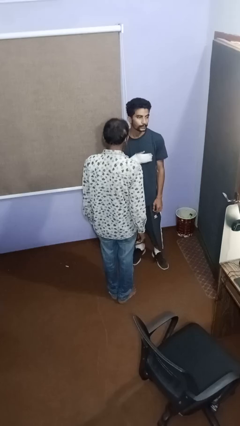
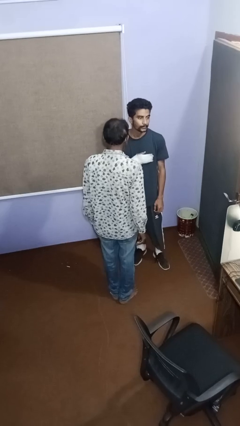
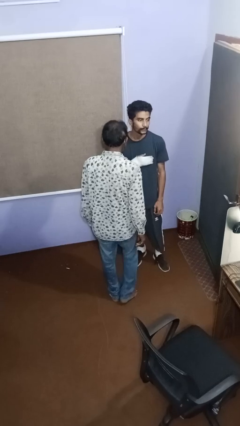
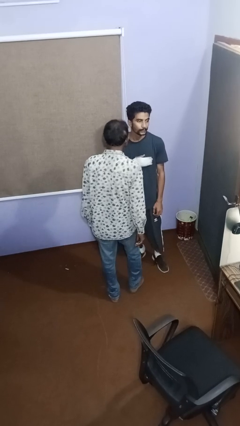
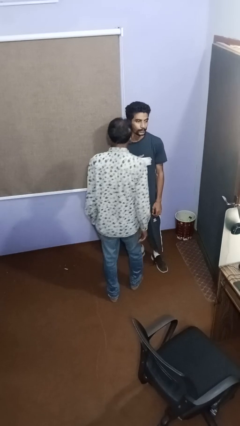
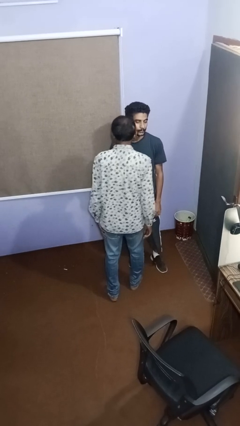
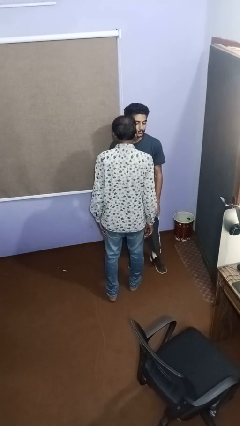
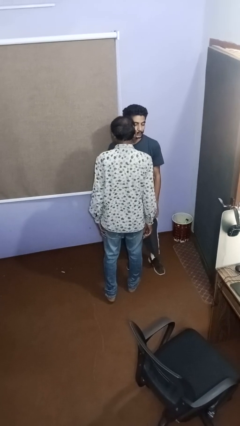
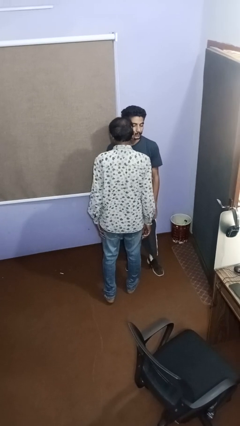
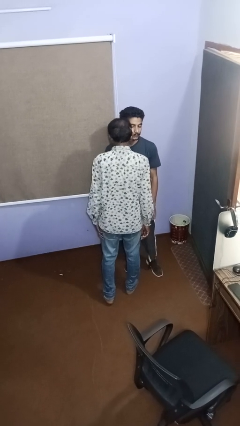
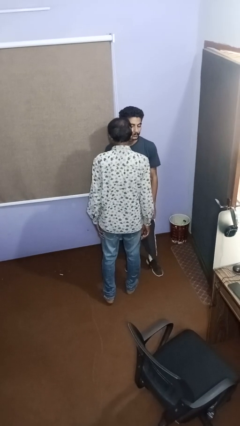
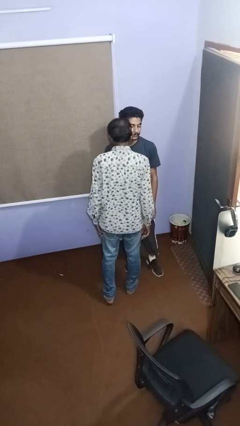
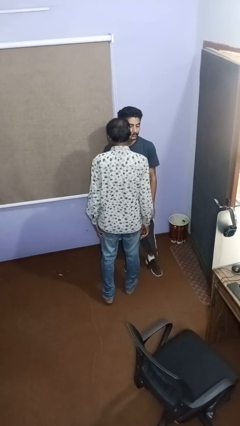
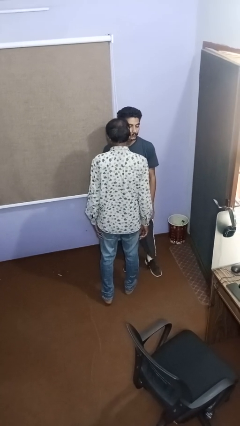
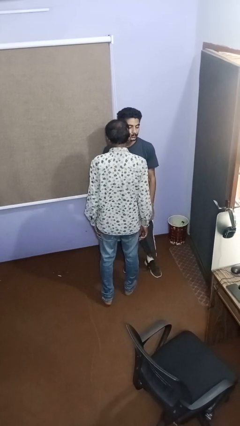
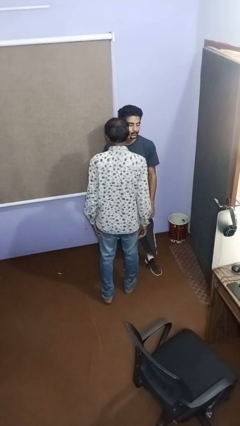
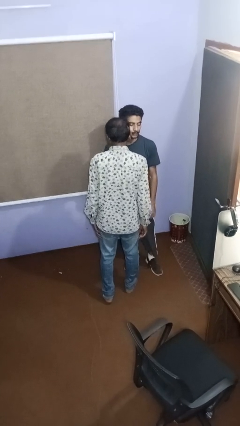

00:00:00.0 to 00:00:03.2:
person kisses cheek of person

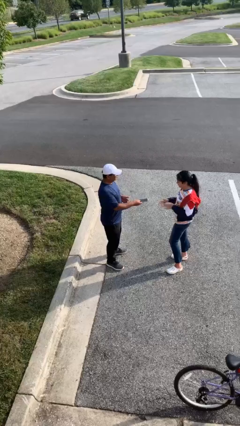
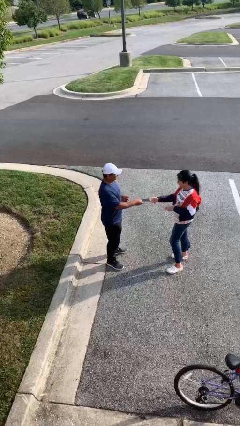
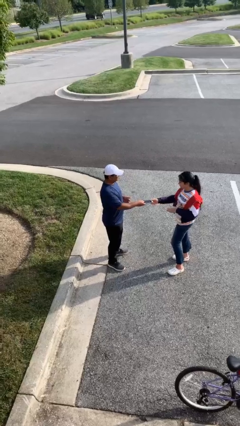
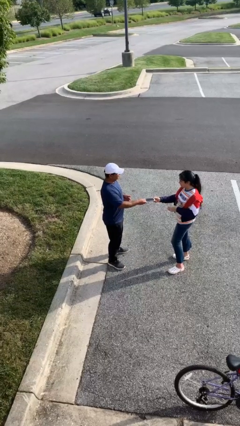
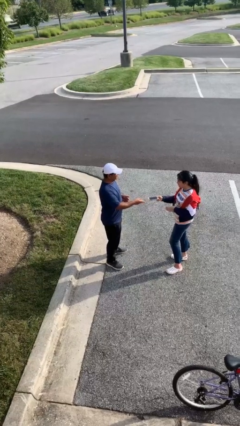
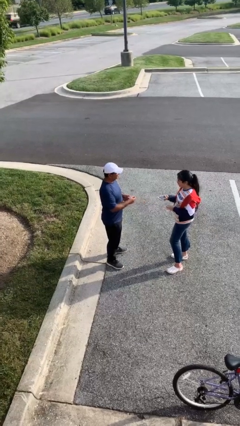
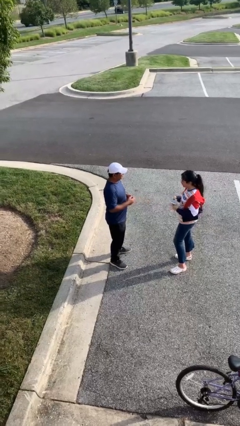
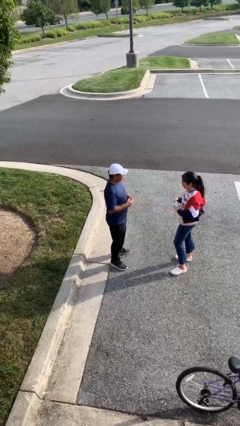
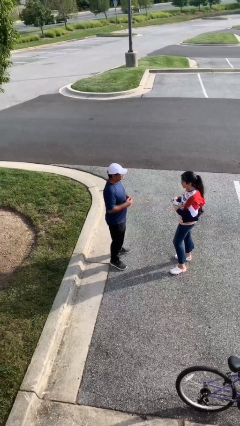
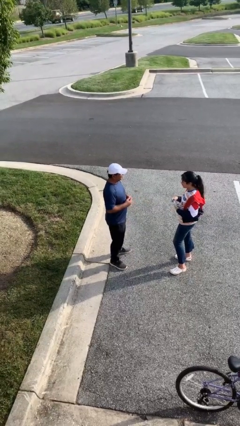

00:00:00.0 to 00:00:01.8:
person transfers object to person

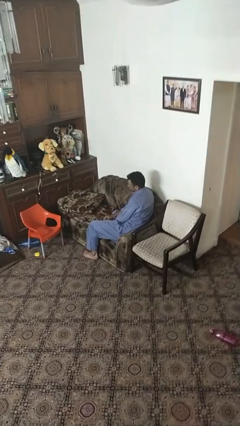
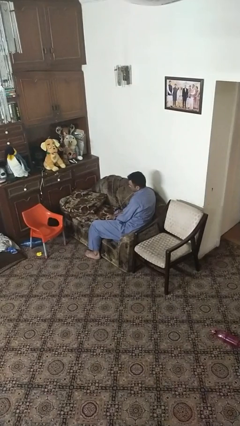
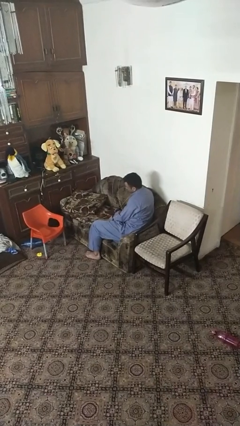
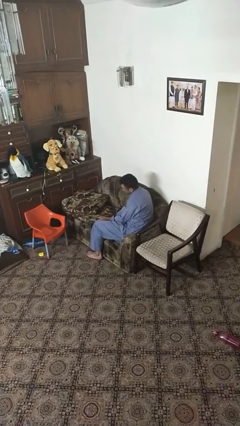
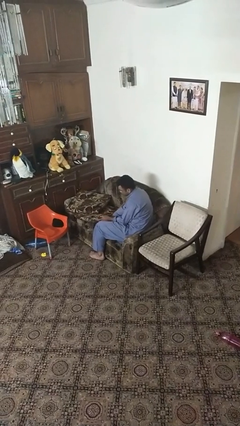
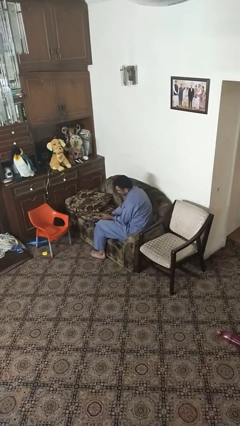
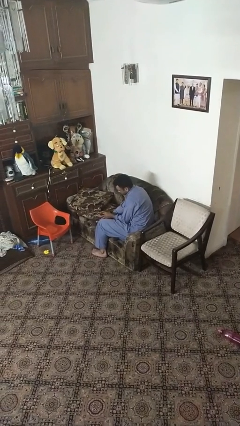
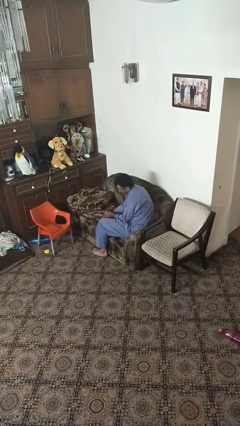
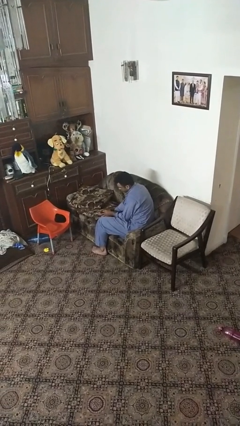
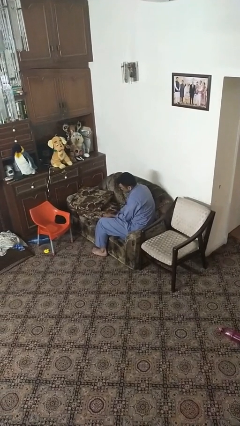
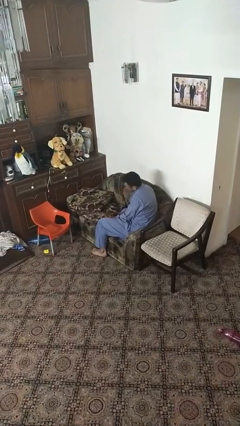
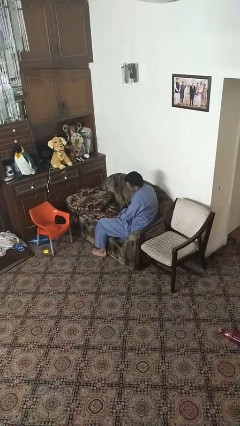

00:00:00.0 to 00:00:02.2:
person searches in couch

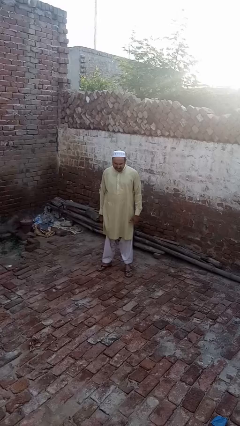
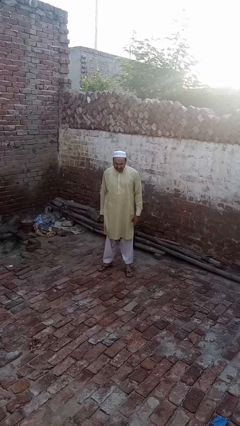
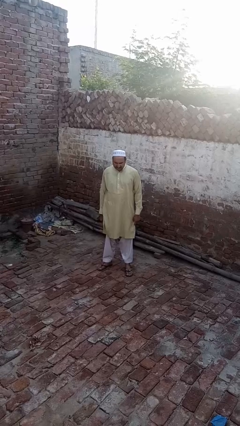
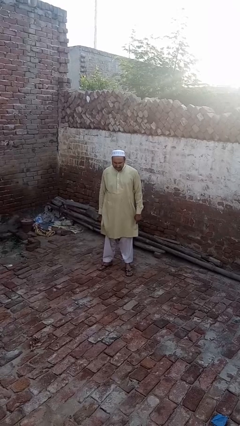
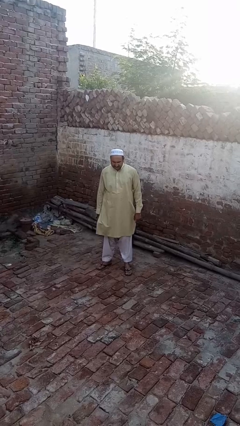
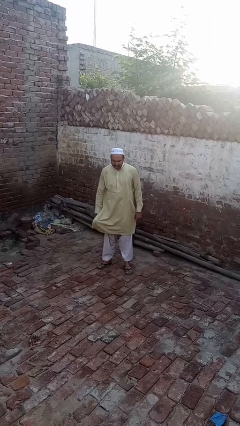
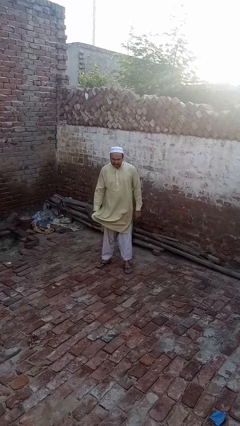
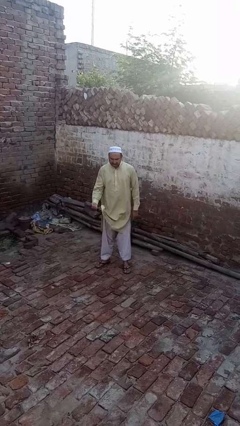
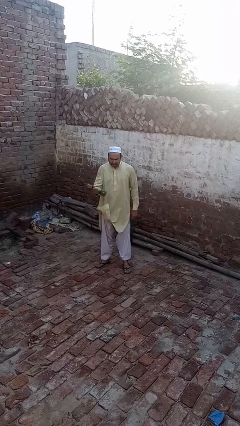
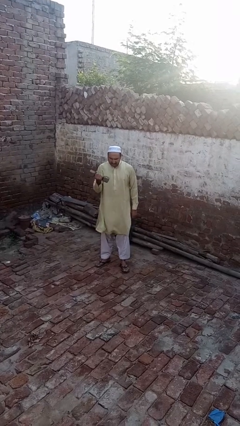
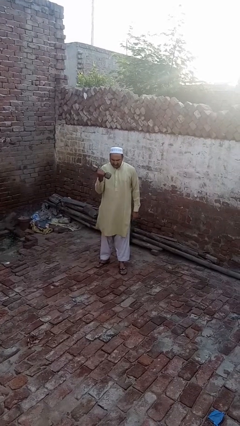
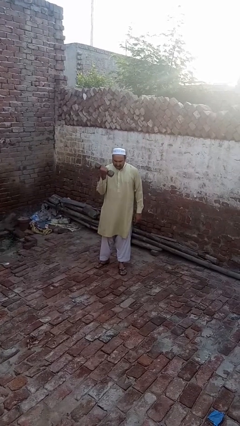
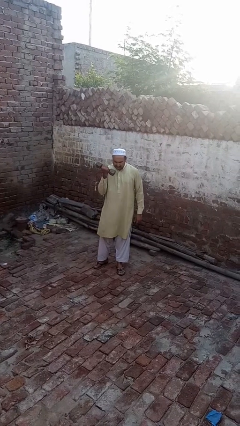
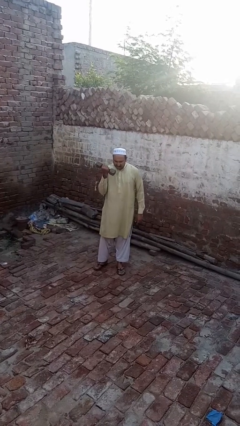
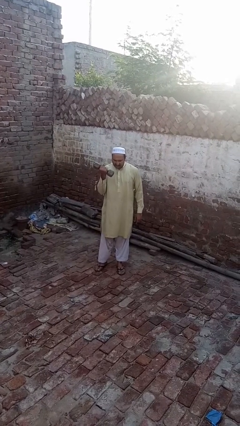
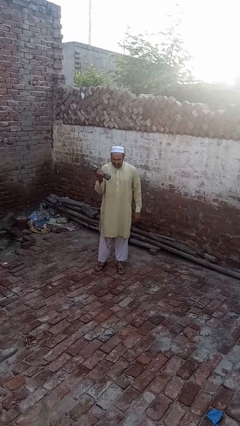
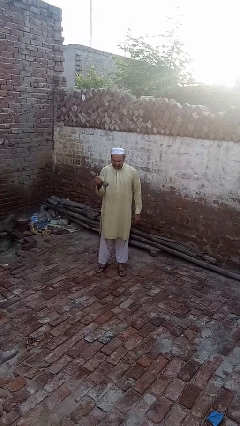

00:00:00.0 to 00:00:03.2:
person lifts dumbbells

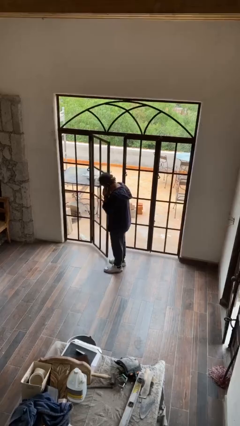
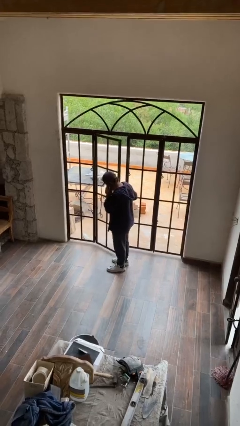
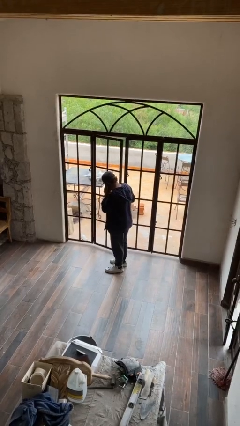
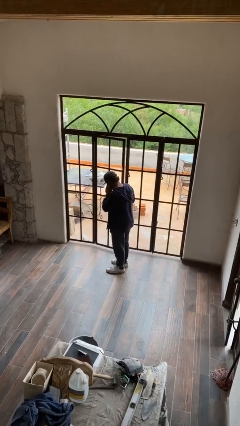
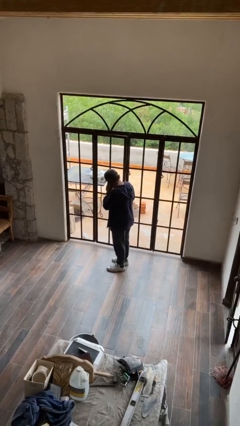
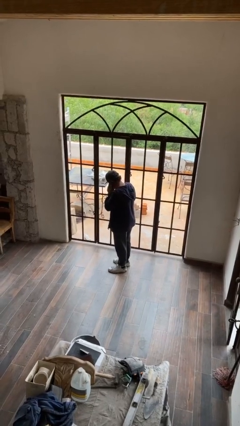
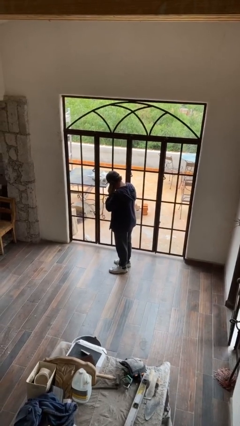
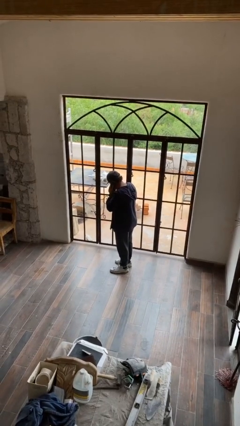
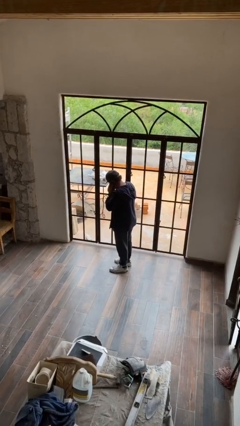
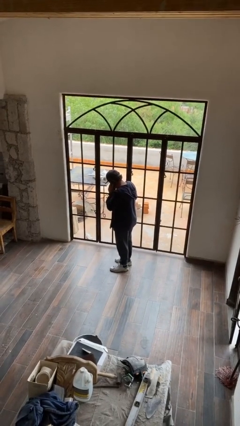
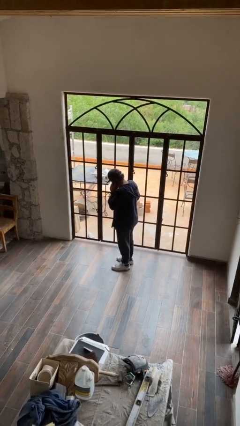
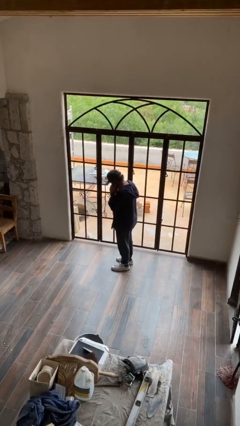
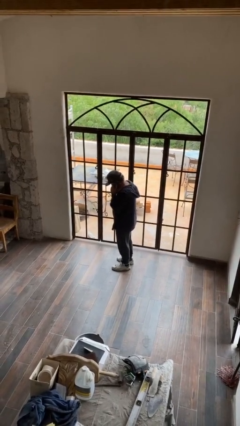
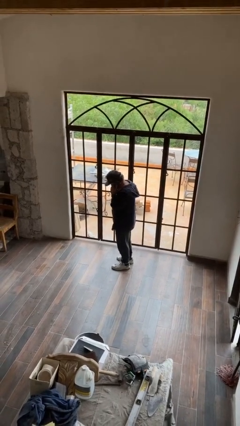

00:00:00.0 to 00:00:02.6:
person closes facility door

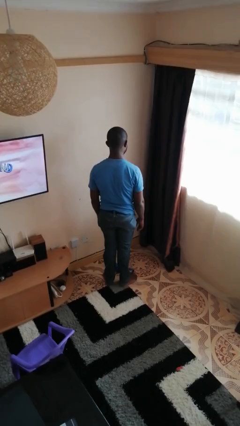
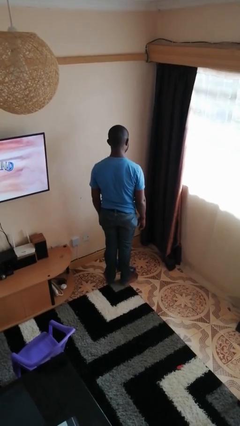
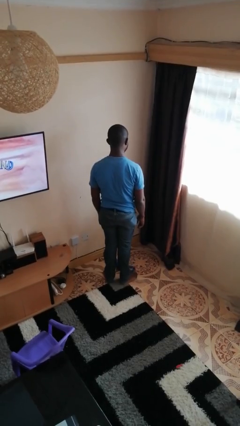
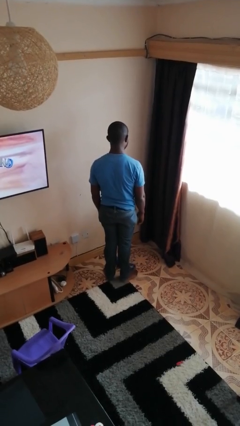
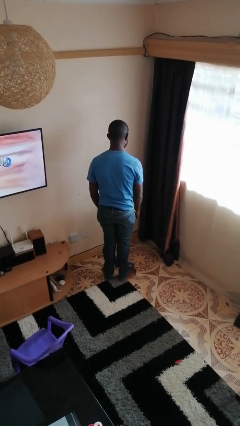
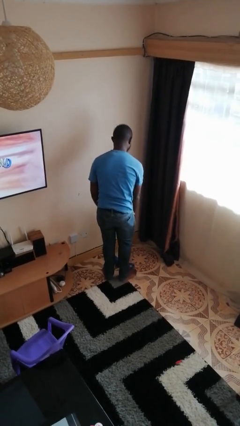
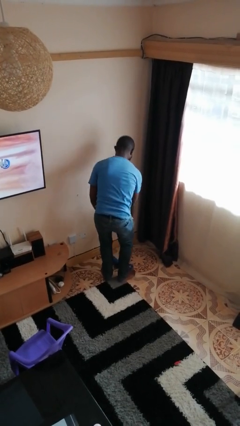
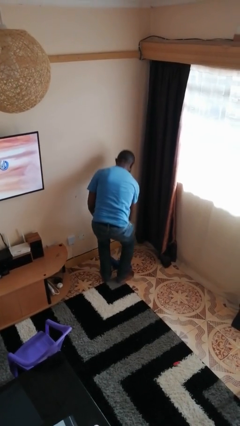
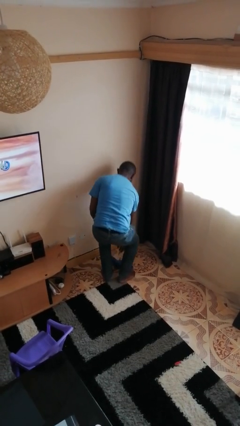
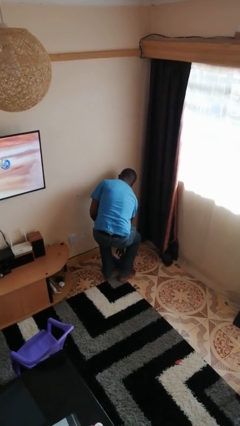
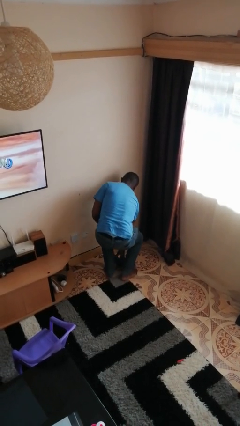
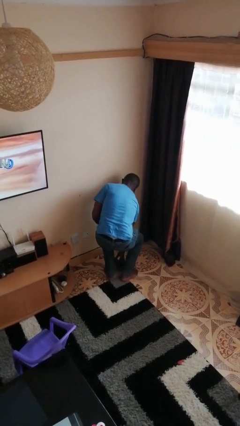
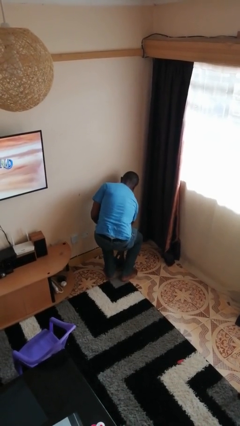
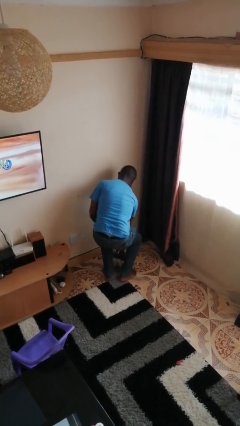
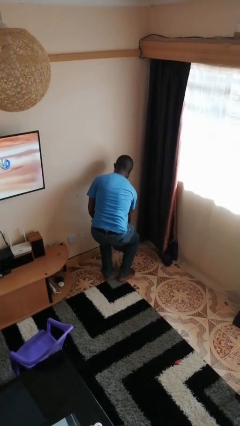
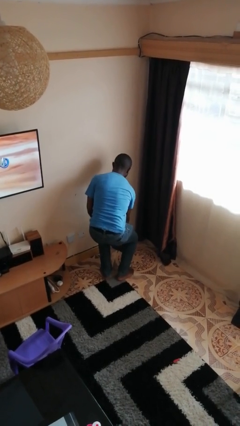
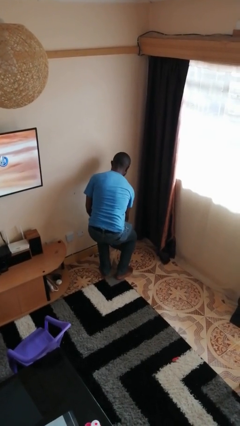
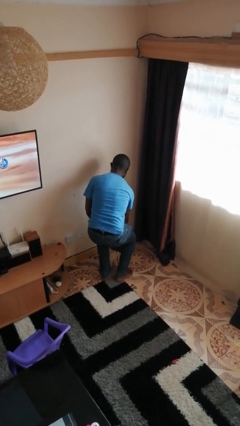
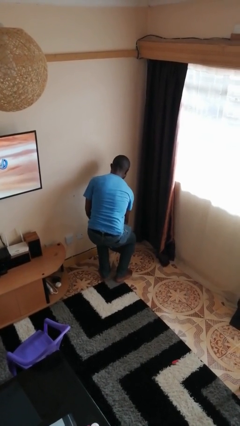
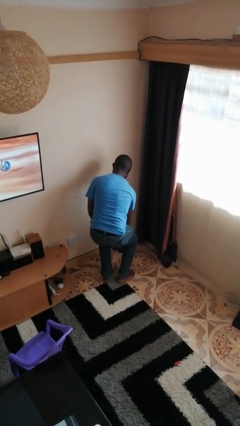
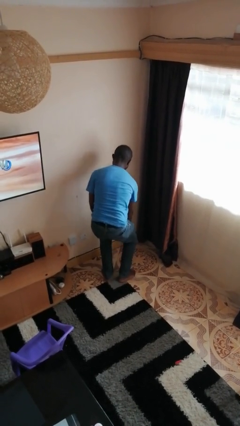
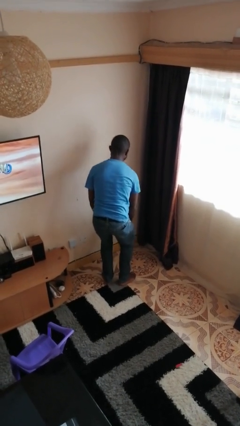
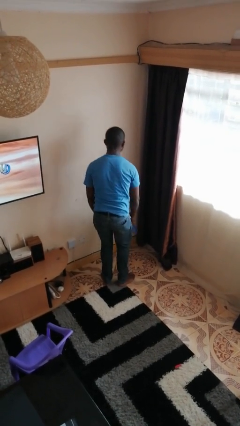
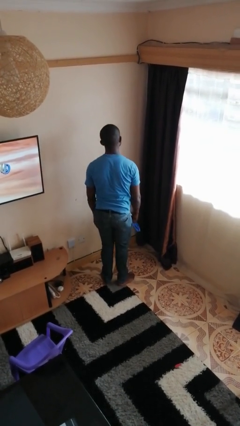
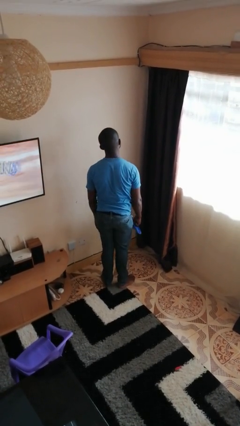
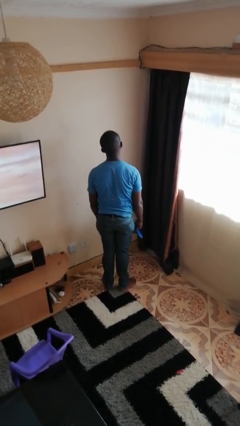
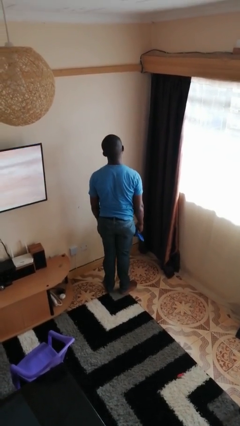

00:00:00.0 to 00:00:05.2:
person picks up object from floor
